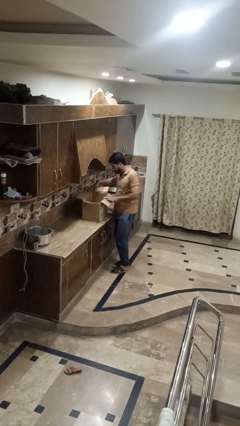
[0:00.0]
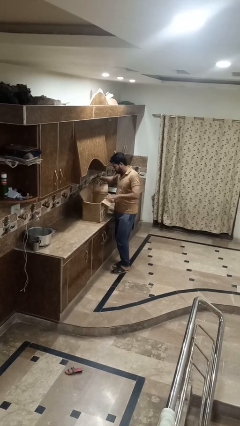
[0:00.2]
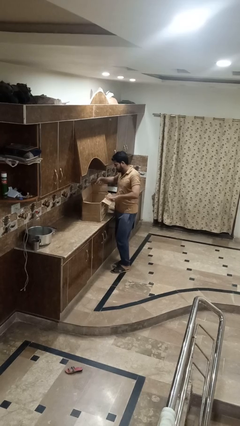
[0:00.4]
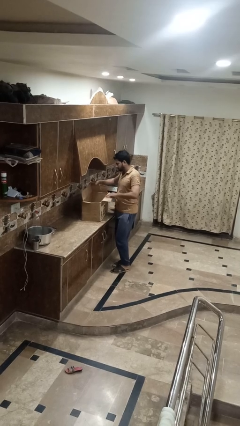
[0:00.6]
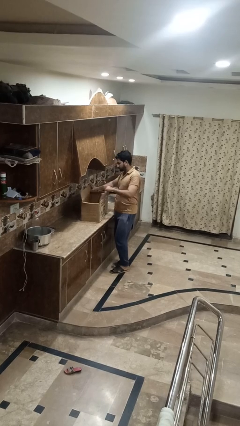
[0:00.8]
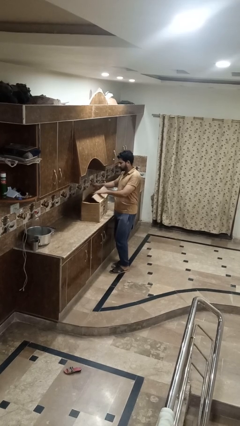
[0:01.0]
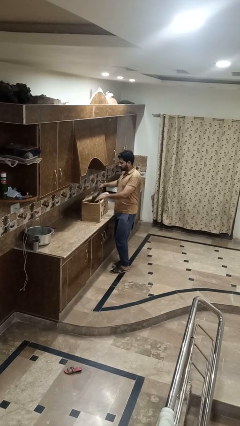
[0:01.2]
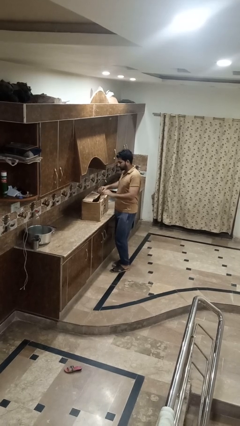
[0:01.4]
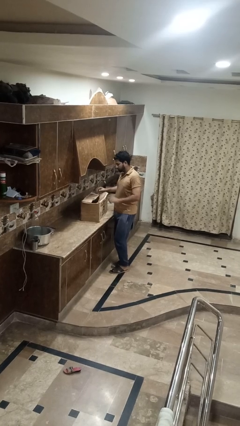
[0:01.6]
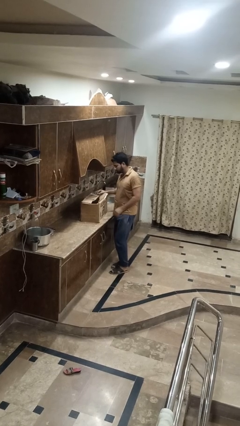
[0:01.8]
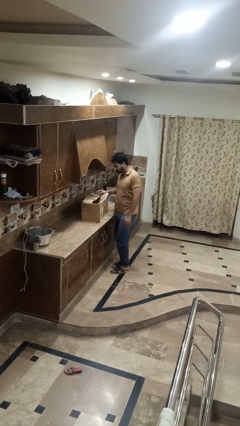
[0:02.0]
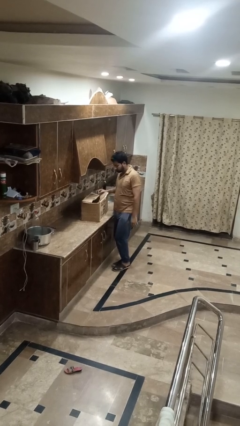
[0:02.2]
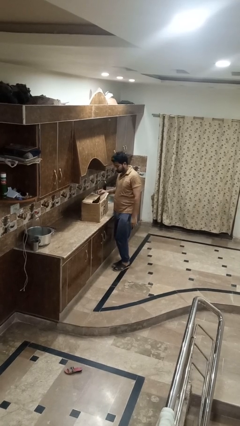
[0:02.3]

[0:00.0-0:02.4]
person closes box

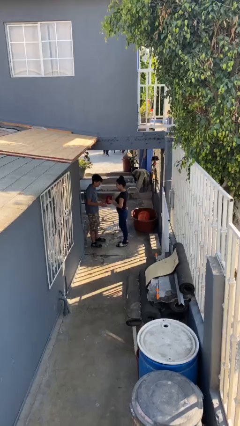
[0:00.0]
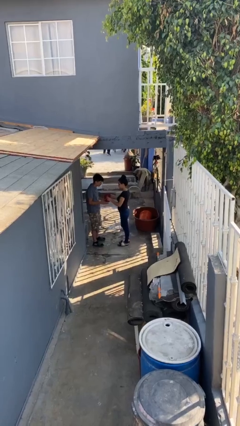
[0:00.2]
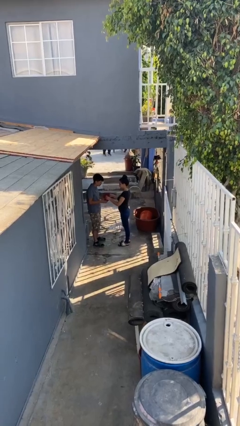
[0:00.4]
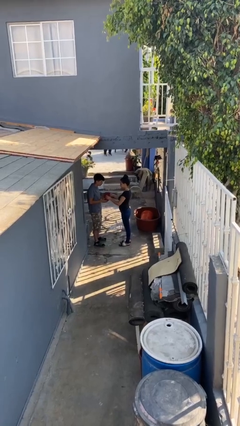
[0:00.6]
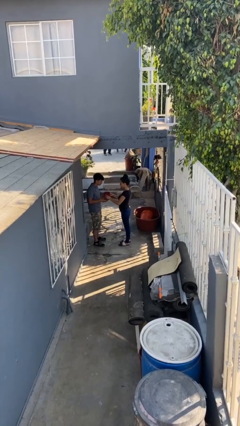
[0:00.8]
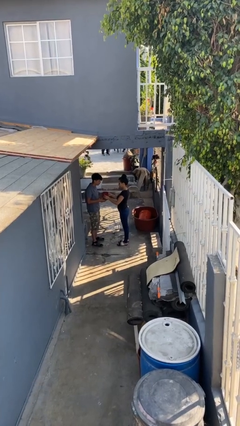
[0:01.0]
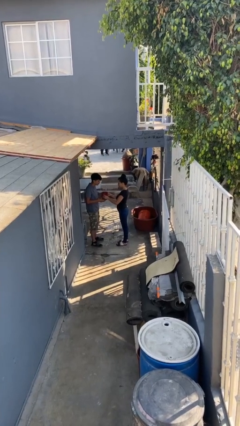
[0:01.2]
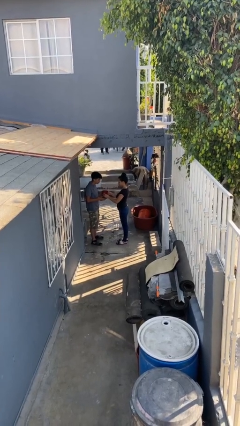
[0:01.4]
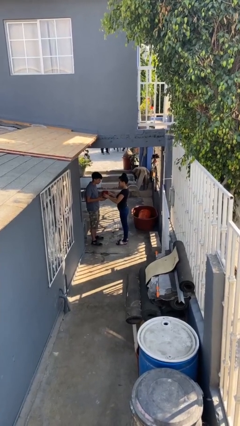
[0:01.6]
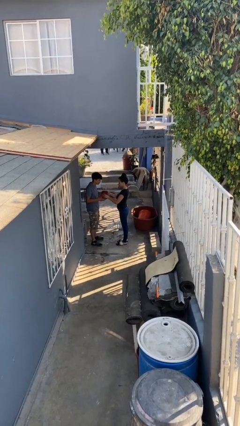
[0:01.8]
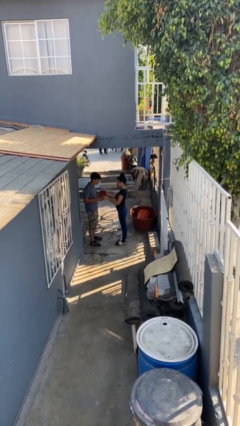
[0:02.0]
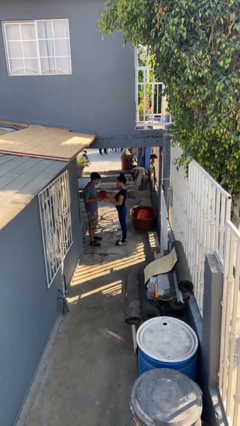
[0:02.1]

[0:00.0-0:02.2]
person transfers object to person

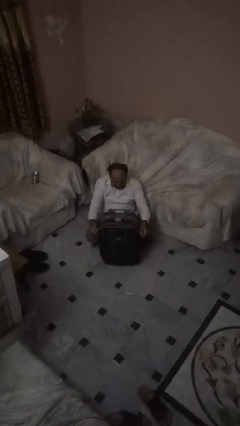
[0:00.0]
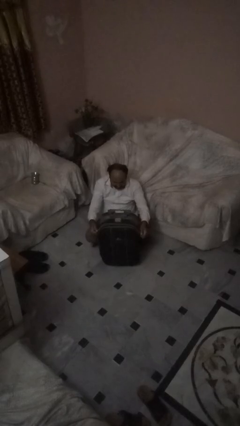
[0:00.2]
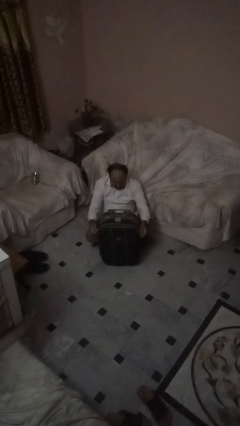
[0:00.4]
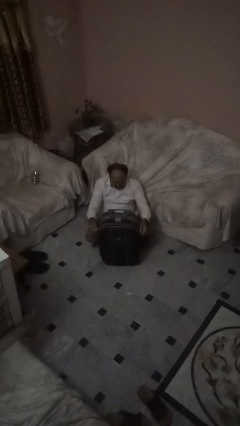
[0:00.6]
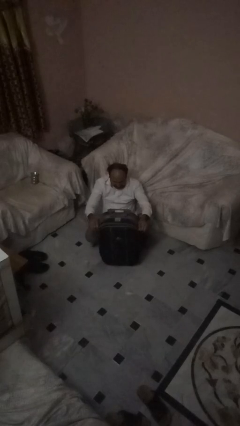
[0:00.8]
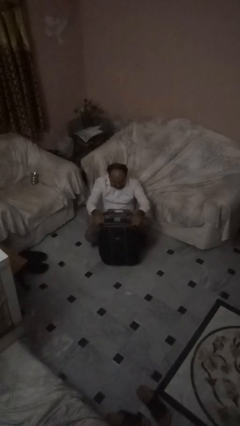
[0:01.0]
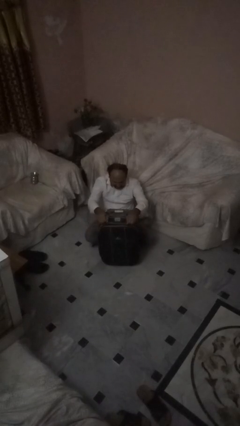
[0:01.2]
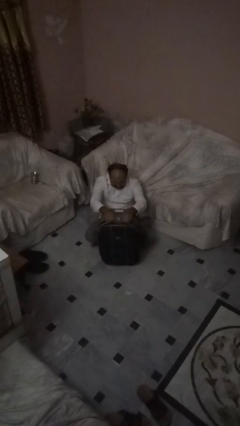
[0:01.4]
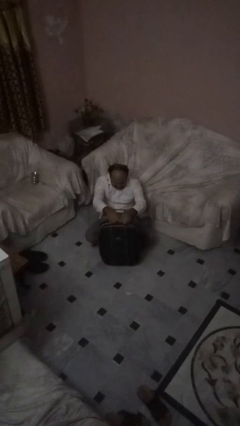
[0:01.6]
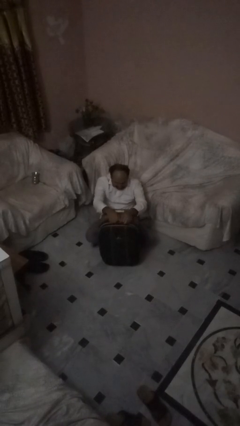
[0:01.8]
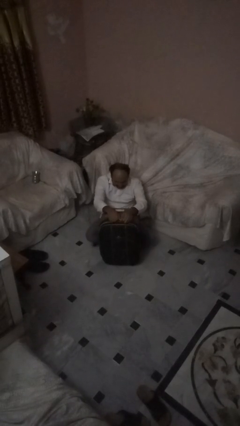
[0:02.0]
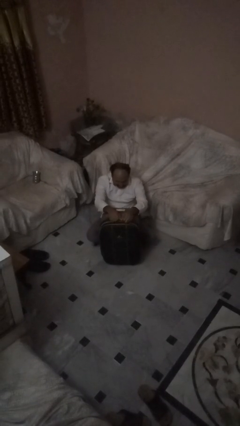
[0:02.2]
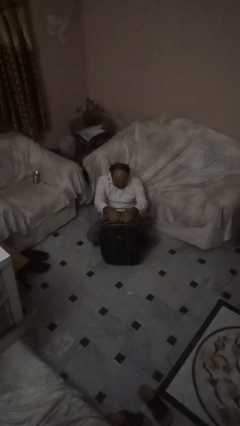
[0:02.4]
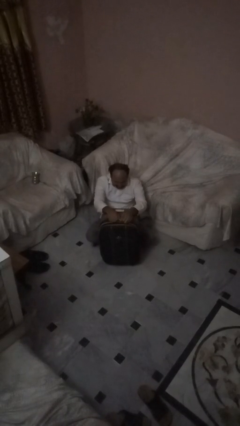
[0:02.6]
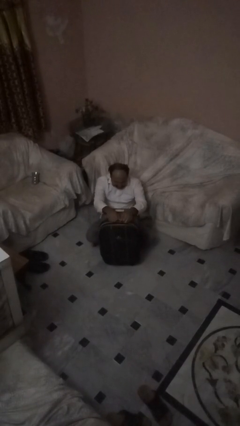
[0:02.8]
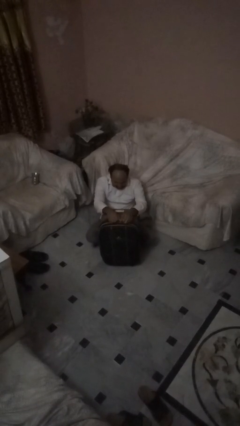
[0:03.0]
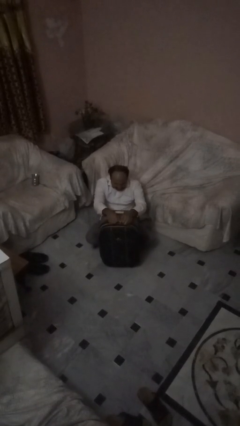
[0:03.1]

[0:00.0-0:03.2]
person closes suitcase

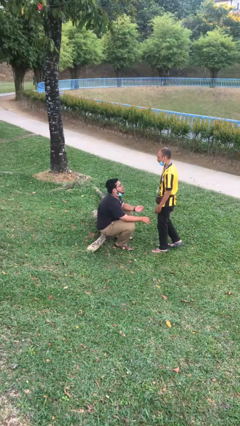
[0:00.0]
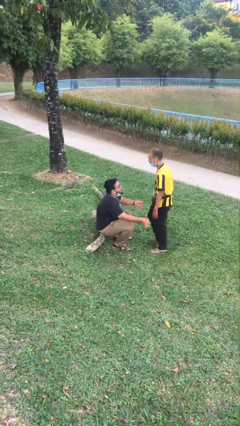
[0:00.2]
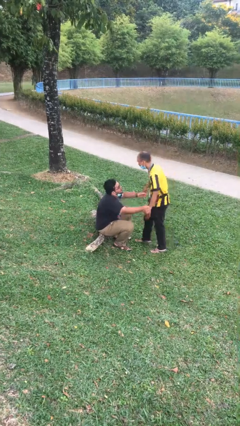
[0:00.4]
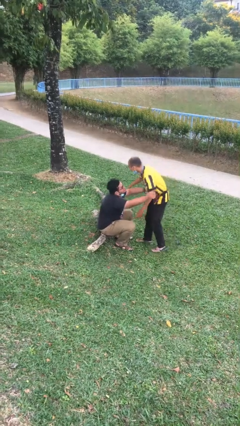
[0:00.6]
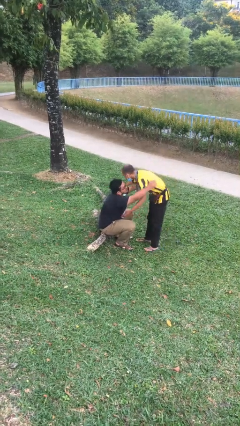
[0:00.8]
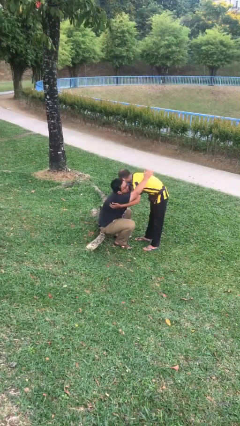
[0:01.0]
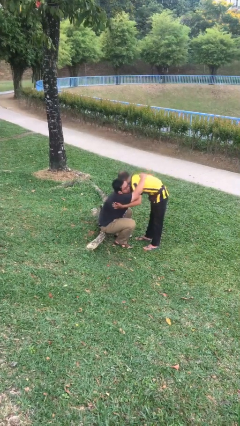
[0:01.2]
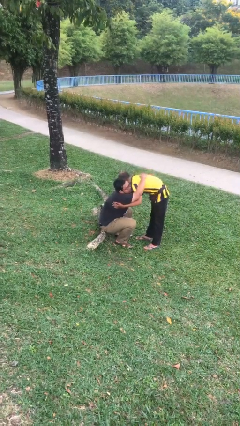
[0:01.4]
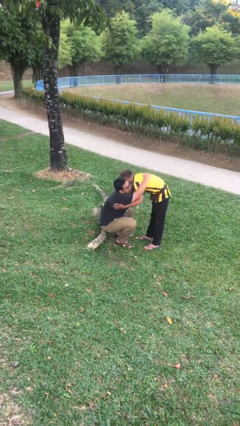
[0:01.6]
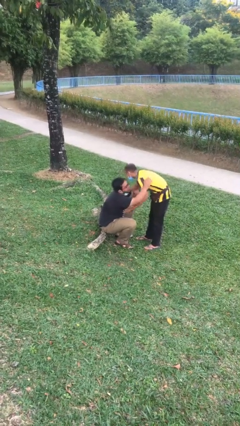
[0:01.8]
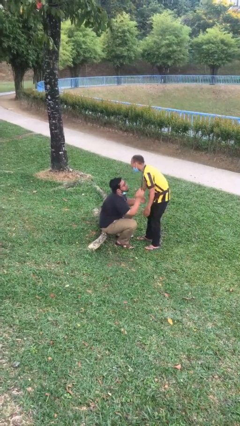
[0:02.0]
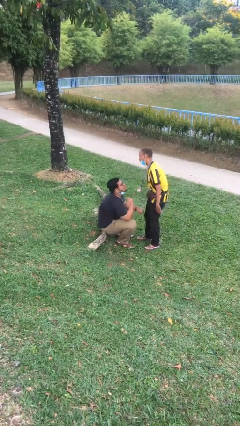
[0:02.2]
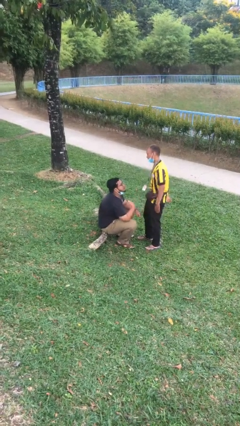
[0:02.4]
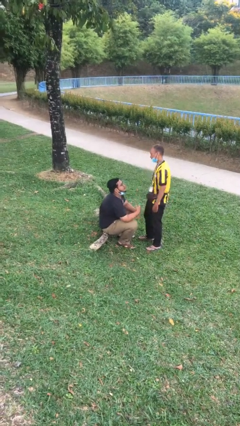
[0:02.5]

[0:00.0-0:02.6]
person embraces person

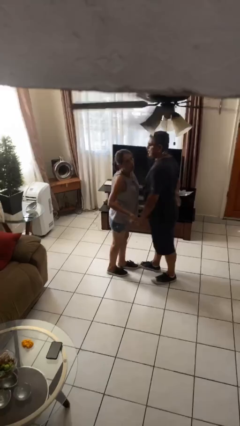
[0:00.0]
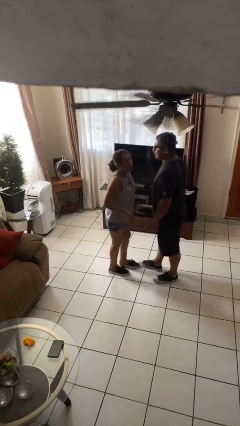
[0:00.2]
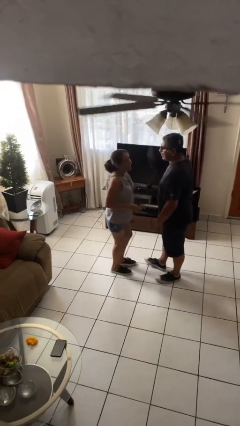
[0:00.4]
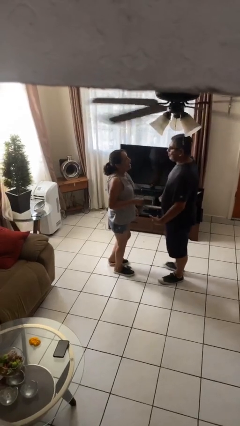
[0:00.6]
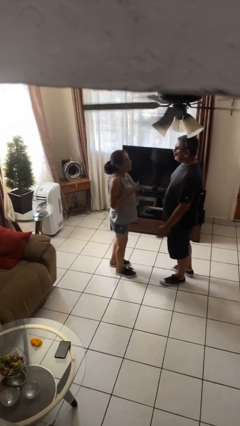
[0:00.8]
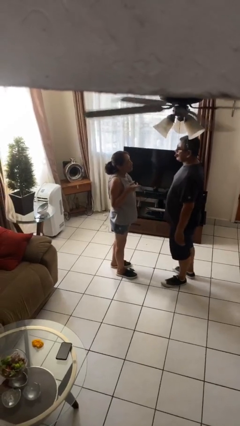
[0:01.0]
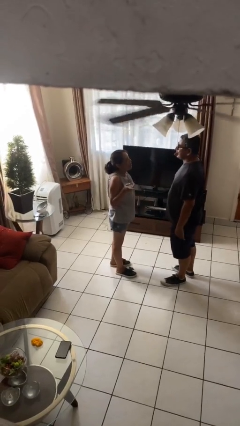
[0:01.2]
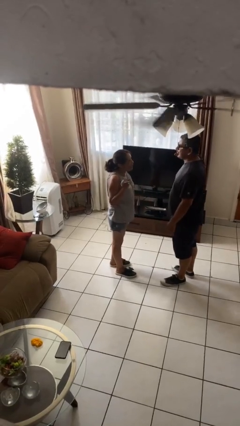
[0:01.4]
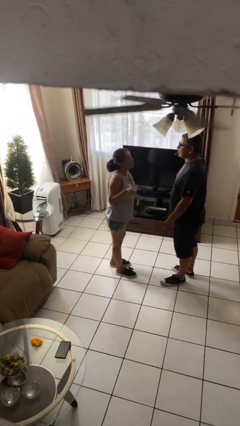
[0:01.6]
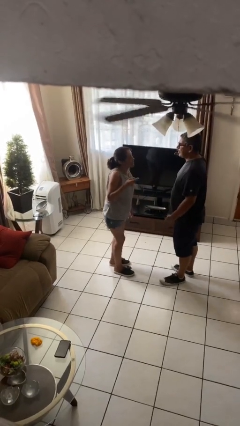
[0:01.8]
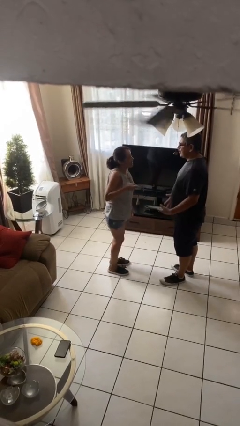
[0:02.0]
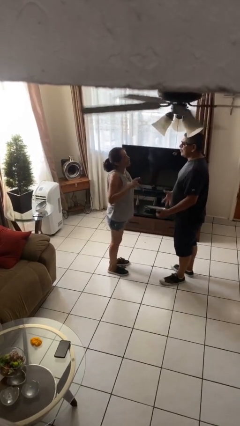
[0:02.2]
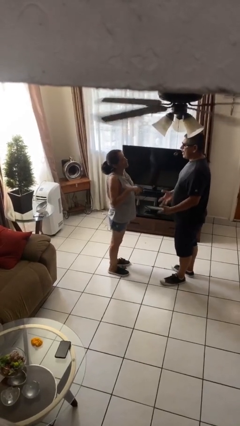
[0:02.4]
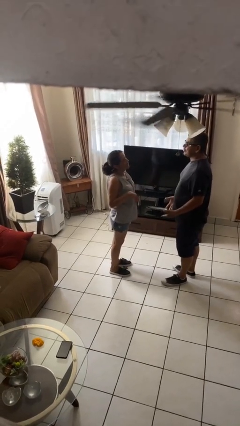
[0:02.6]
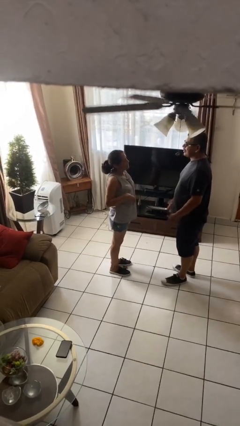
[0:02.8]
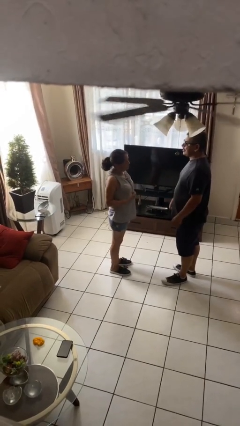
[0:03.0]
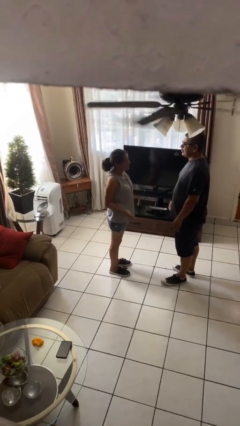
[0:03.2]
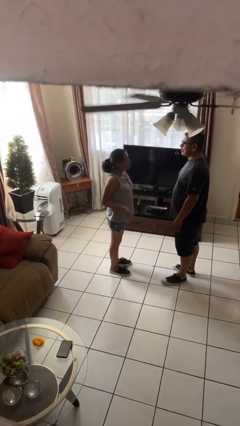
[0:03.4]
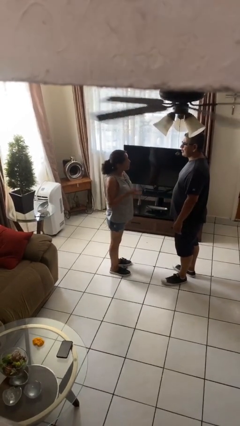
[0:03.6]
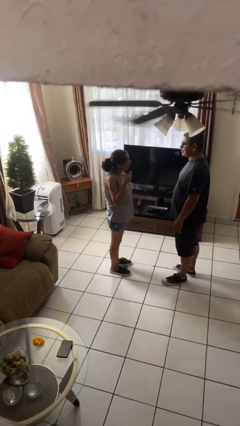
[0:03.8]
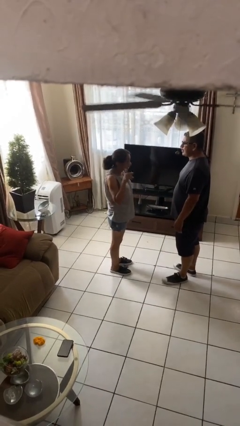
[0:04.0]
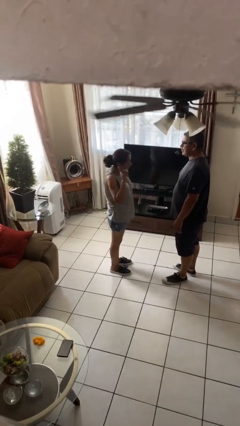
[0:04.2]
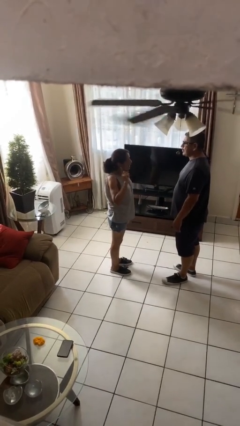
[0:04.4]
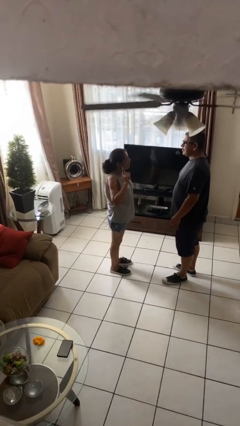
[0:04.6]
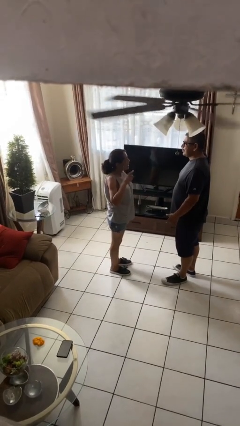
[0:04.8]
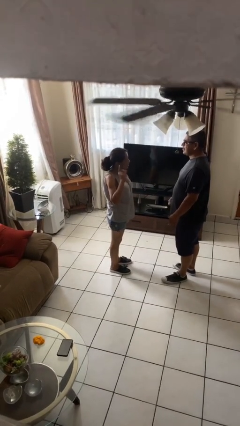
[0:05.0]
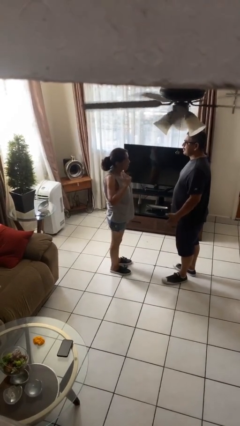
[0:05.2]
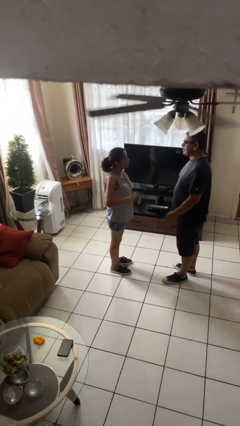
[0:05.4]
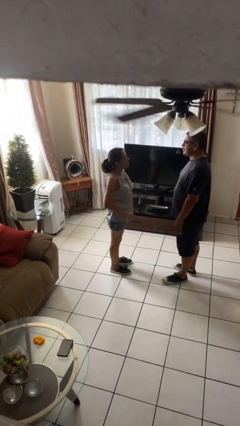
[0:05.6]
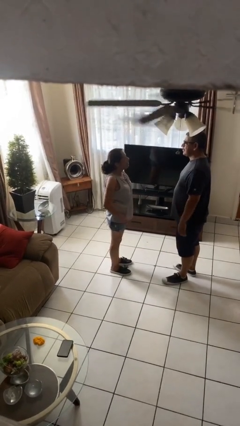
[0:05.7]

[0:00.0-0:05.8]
person talks to person

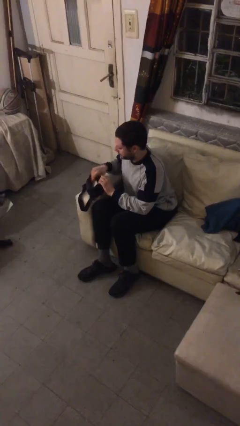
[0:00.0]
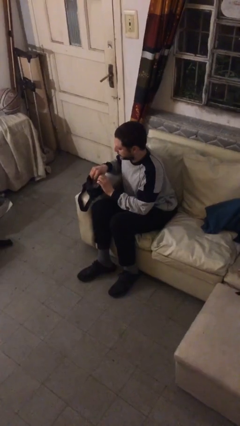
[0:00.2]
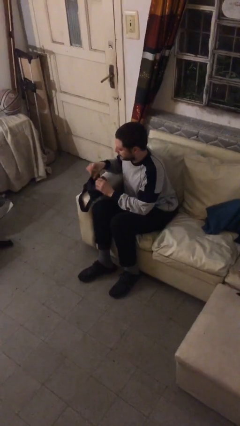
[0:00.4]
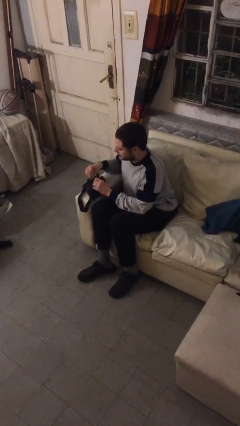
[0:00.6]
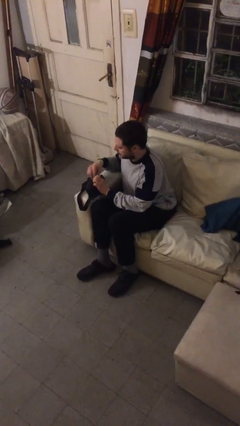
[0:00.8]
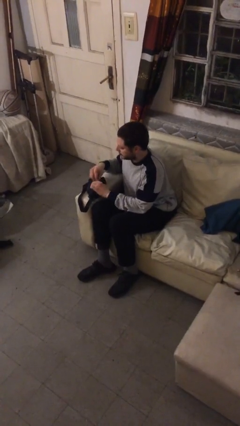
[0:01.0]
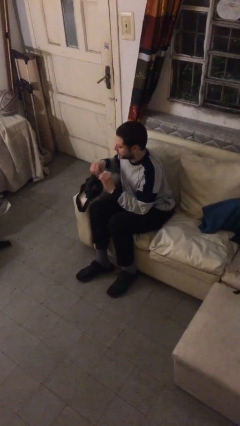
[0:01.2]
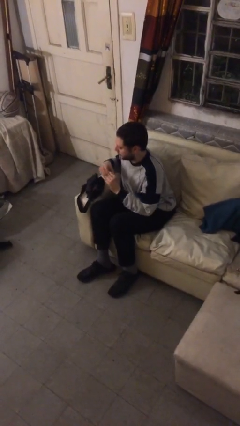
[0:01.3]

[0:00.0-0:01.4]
person puts object into purse

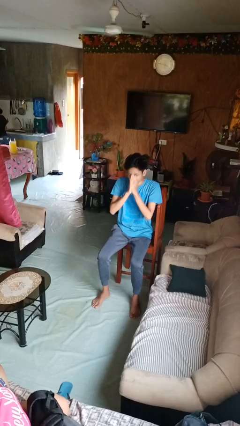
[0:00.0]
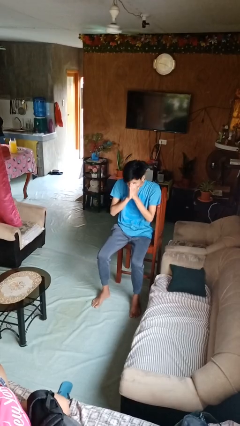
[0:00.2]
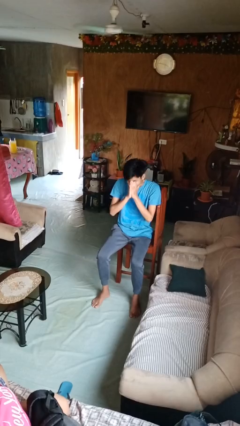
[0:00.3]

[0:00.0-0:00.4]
person sneezes into hand
